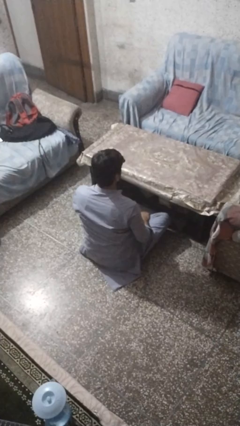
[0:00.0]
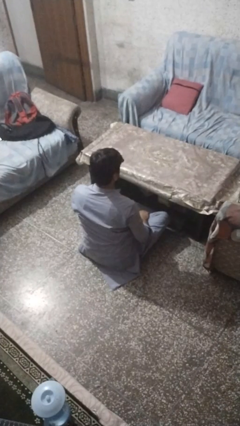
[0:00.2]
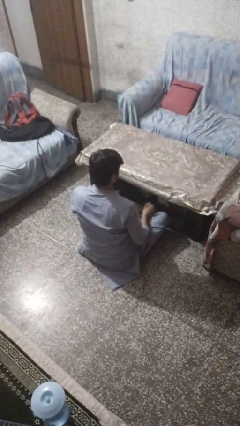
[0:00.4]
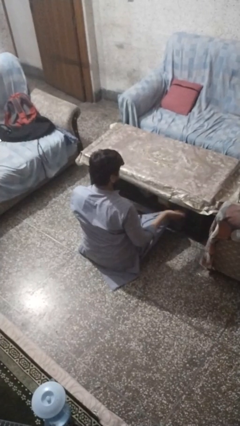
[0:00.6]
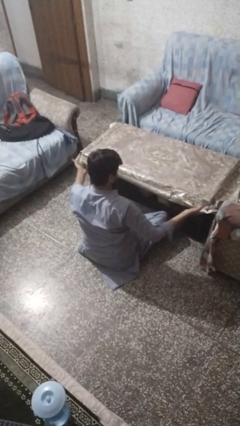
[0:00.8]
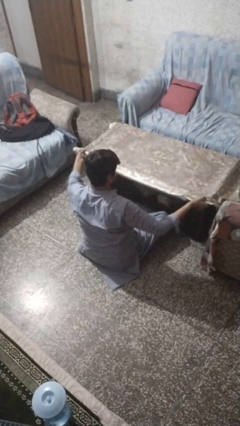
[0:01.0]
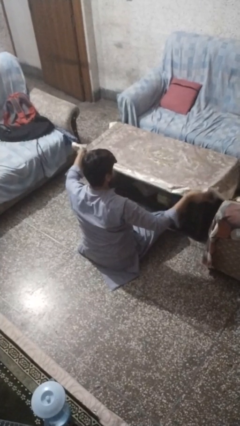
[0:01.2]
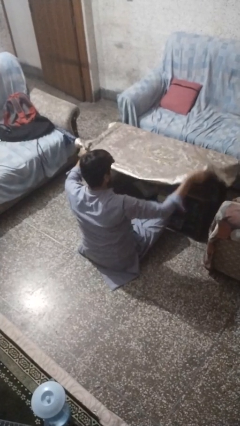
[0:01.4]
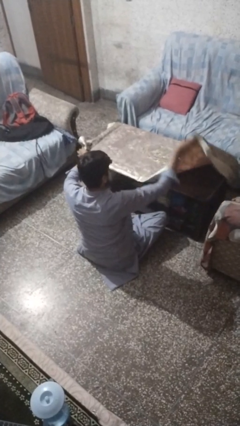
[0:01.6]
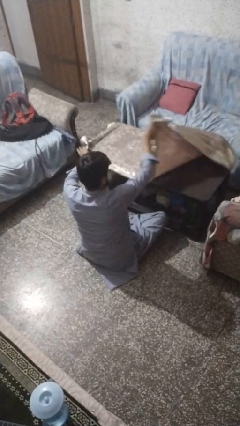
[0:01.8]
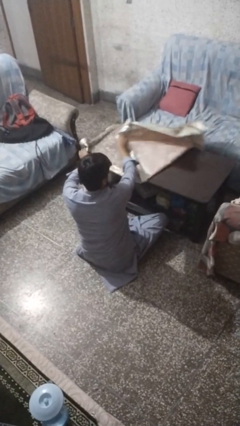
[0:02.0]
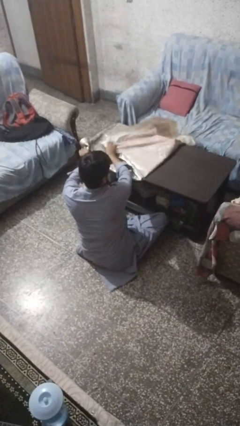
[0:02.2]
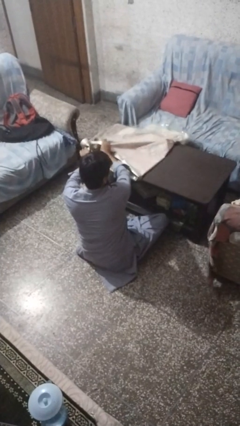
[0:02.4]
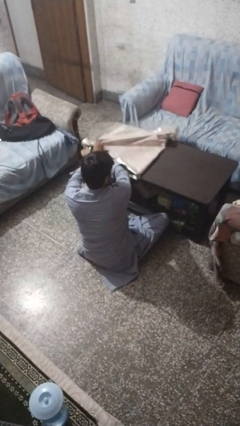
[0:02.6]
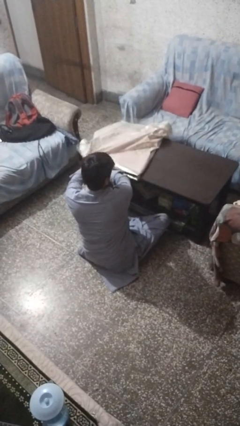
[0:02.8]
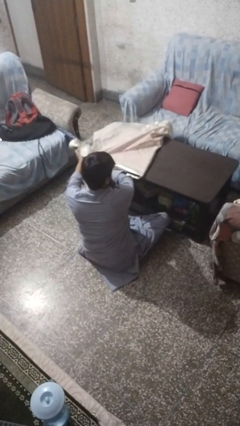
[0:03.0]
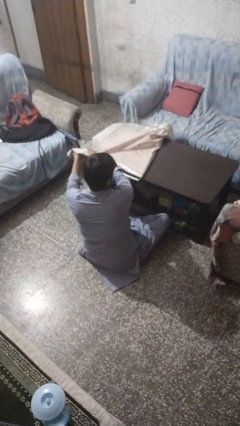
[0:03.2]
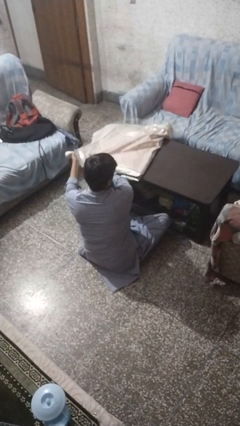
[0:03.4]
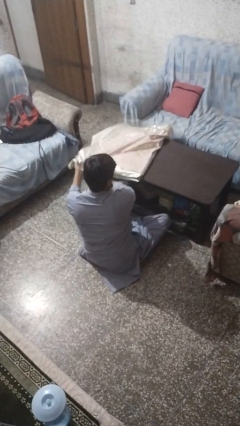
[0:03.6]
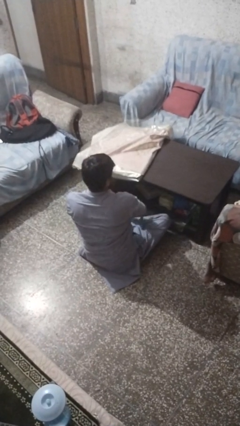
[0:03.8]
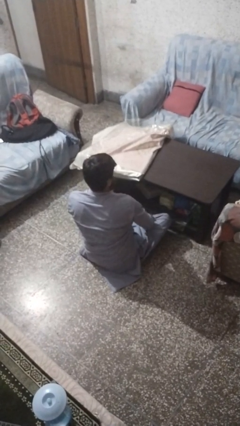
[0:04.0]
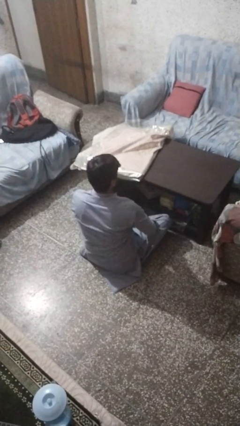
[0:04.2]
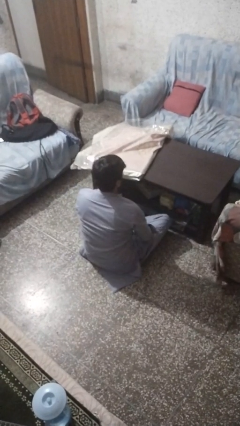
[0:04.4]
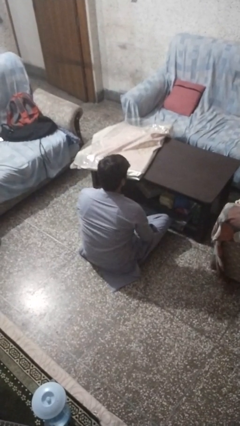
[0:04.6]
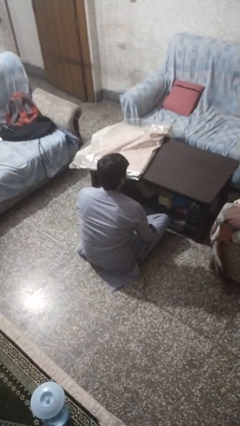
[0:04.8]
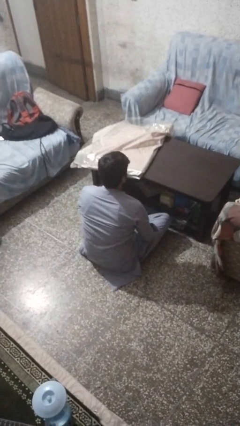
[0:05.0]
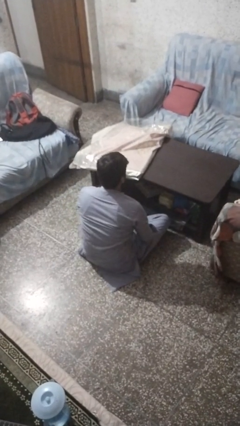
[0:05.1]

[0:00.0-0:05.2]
person folds tablecloth

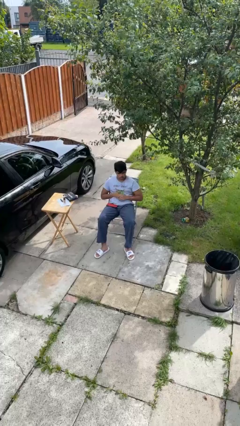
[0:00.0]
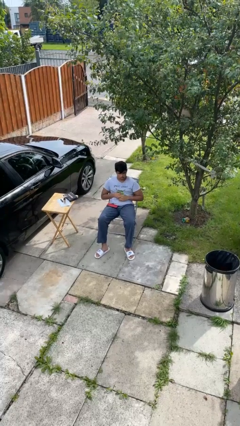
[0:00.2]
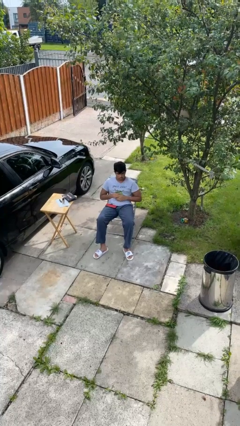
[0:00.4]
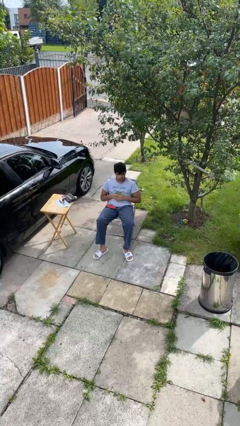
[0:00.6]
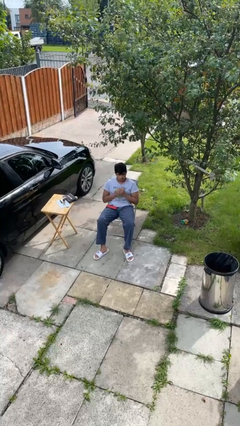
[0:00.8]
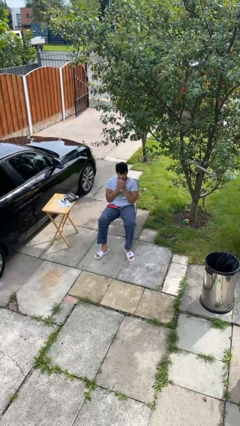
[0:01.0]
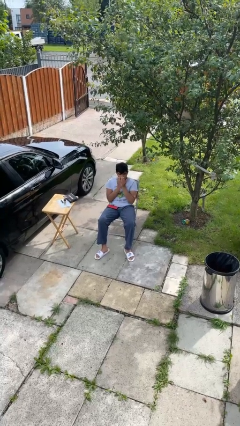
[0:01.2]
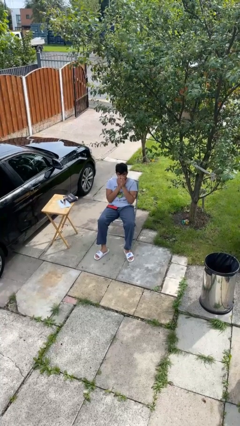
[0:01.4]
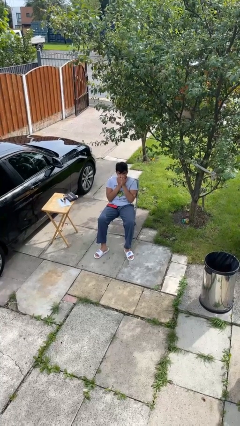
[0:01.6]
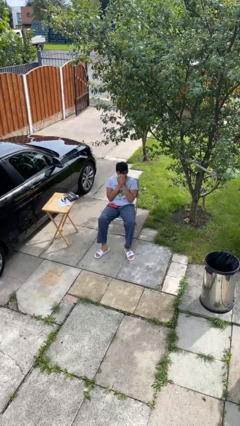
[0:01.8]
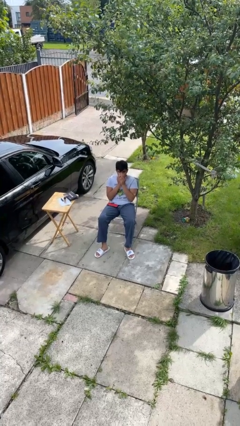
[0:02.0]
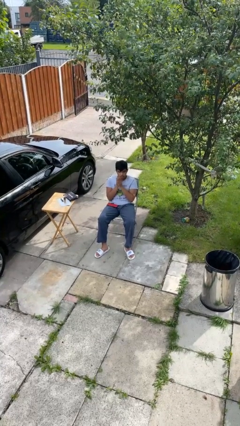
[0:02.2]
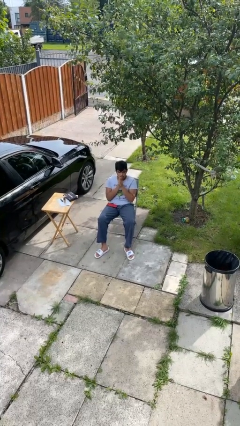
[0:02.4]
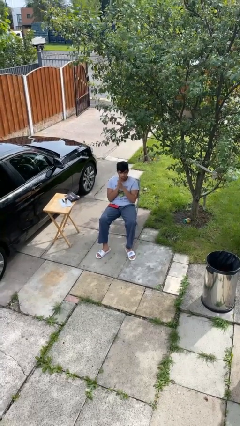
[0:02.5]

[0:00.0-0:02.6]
person blows into hands

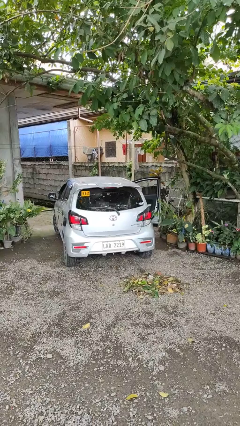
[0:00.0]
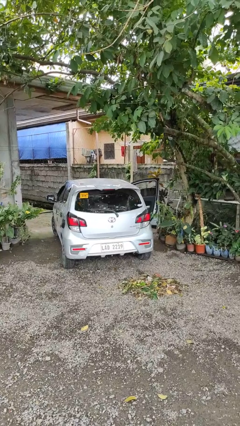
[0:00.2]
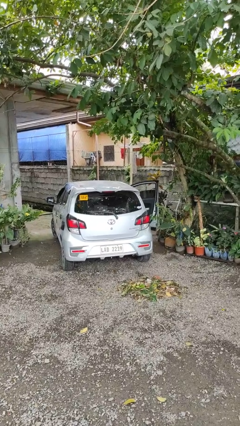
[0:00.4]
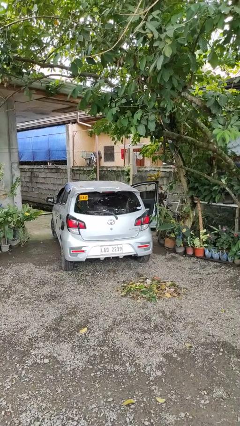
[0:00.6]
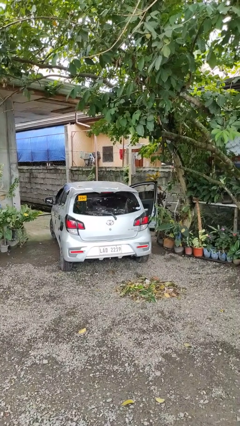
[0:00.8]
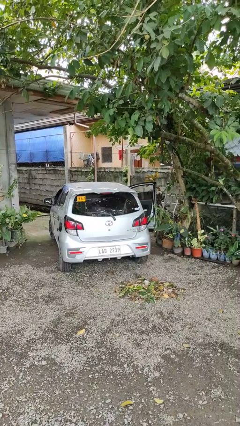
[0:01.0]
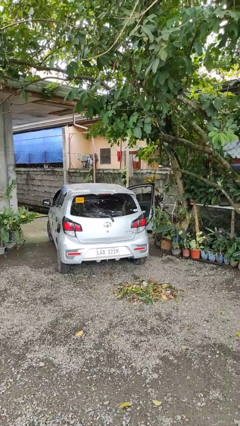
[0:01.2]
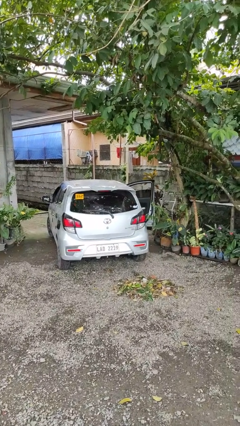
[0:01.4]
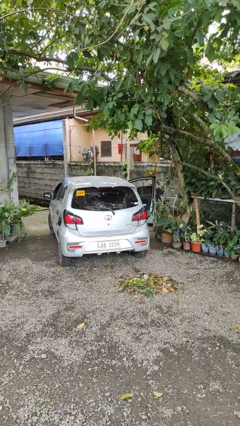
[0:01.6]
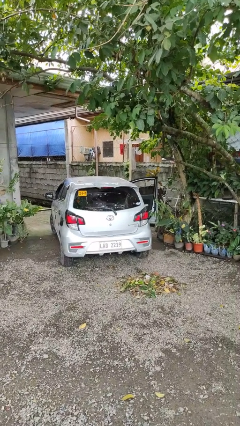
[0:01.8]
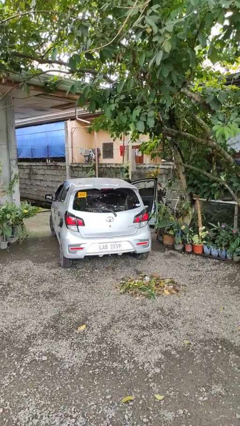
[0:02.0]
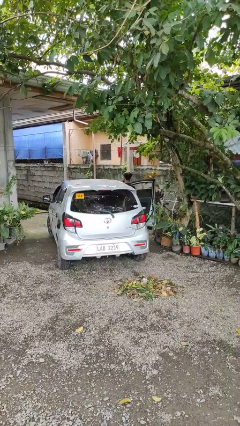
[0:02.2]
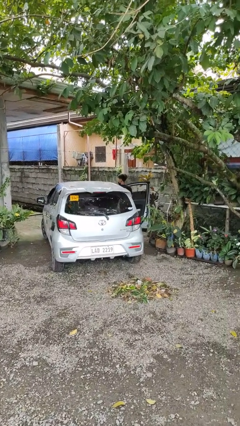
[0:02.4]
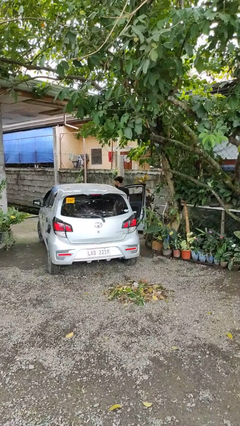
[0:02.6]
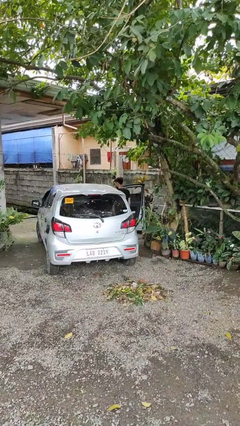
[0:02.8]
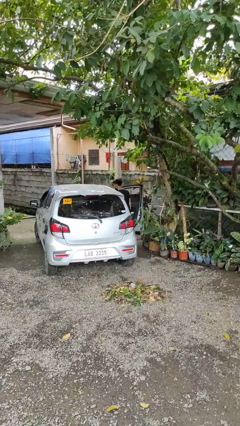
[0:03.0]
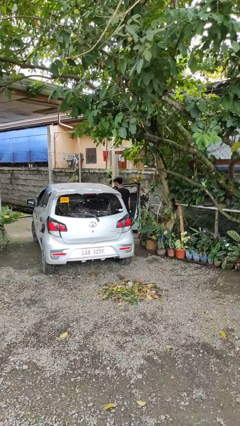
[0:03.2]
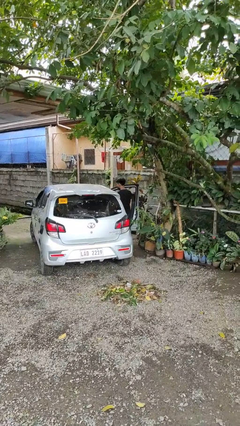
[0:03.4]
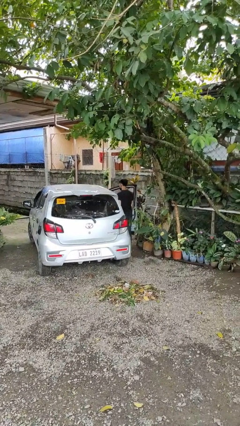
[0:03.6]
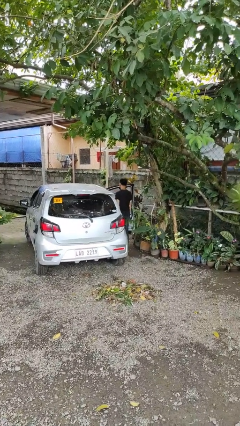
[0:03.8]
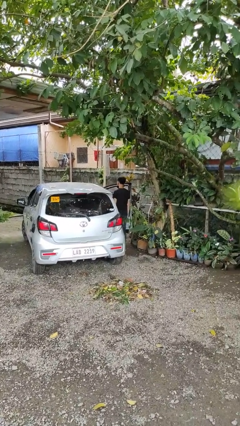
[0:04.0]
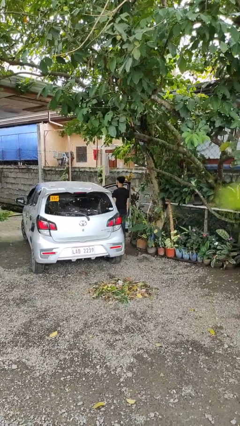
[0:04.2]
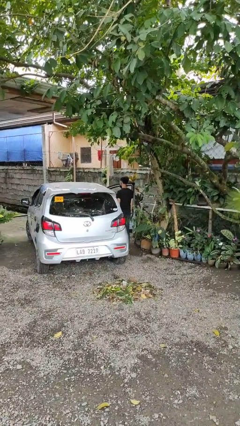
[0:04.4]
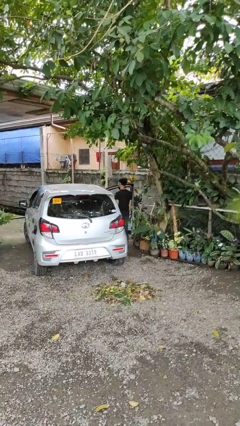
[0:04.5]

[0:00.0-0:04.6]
person exits car

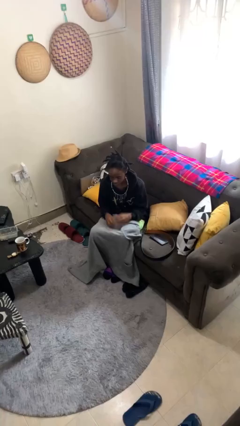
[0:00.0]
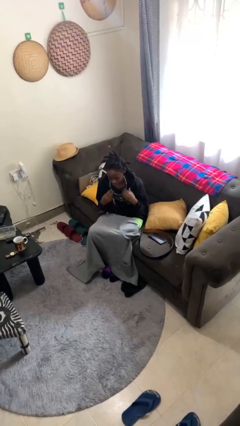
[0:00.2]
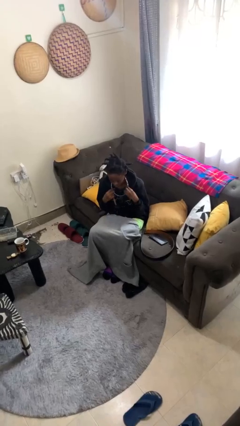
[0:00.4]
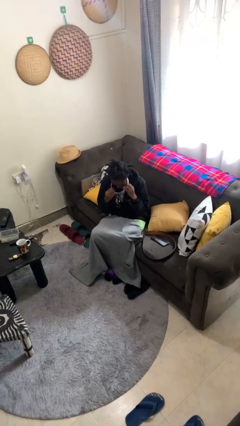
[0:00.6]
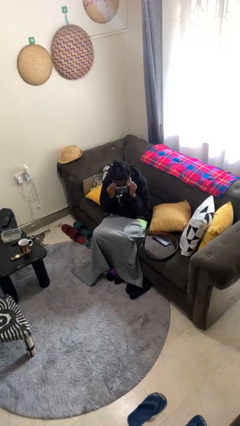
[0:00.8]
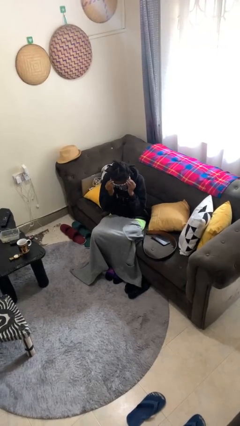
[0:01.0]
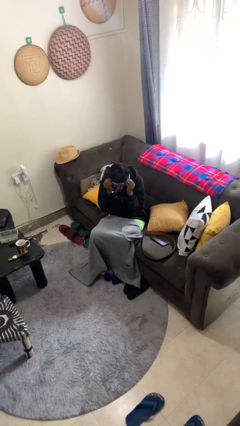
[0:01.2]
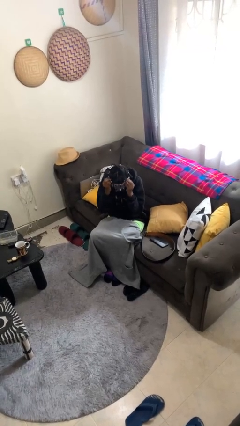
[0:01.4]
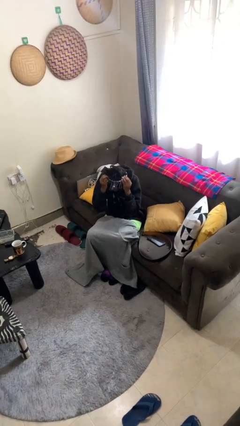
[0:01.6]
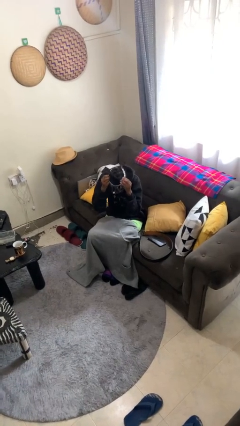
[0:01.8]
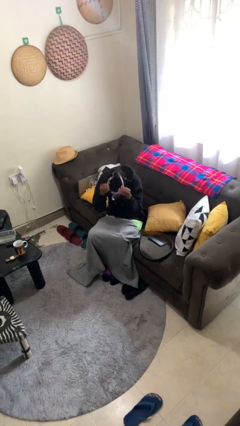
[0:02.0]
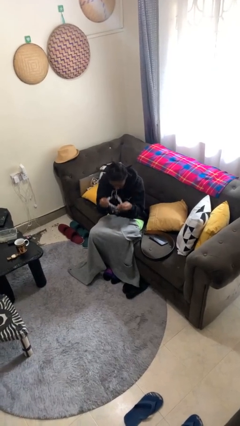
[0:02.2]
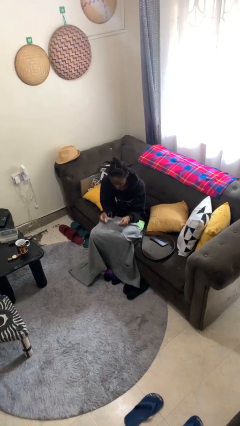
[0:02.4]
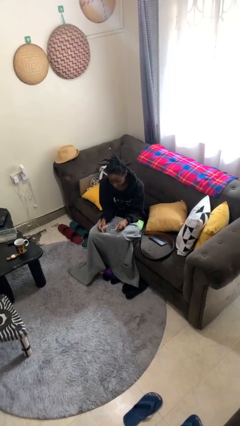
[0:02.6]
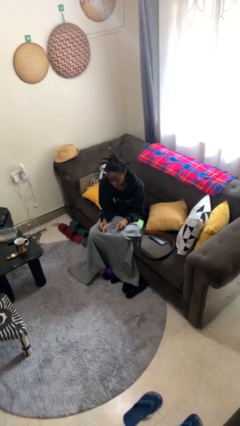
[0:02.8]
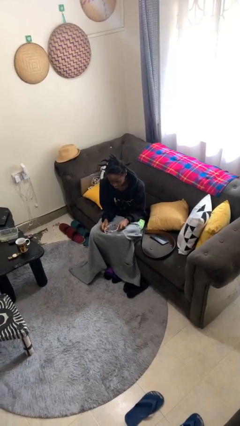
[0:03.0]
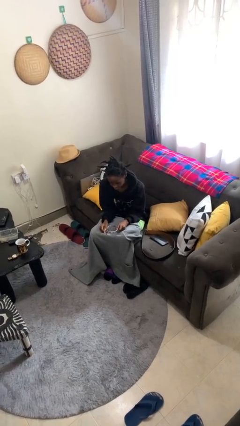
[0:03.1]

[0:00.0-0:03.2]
person takes off necklace

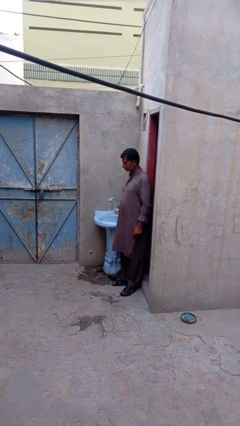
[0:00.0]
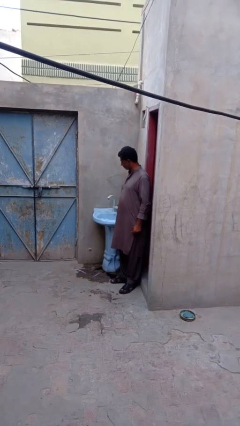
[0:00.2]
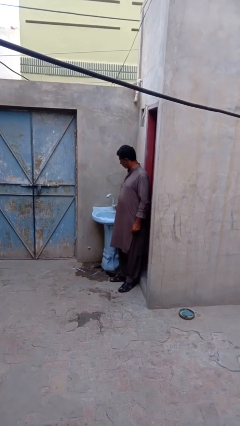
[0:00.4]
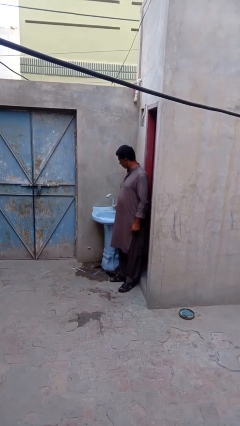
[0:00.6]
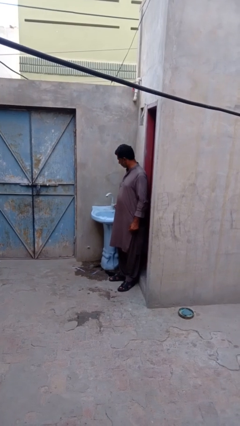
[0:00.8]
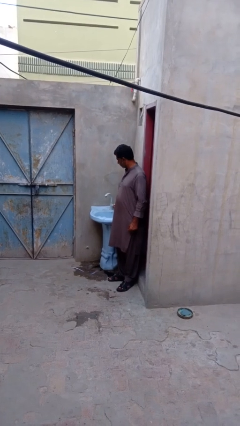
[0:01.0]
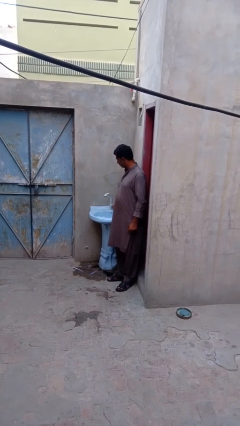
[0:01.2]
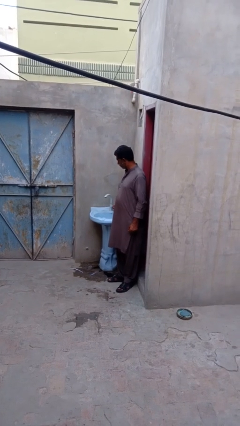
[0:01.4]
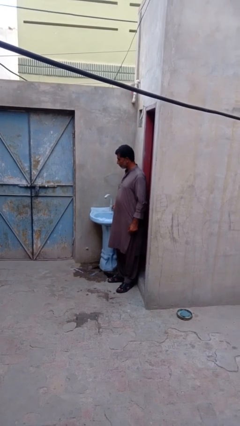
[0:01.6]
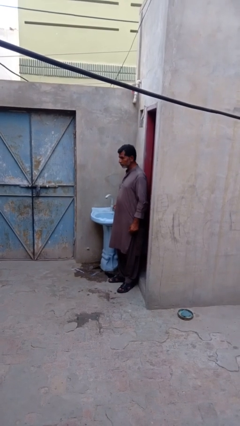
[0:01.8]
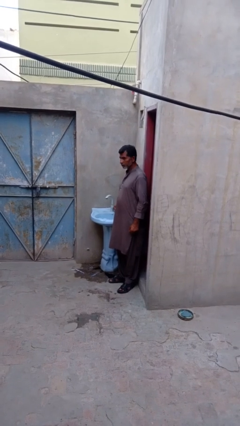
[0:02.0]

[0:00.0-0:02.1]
person turns off faucet
